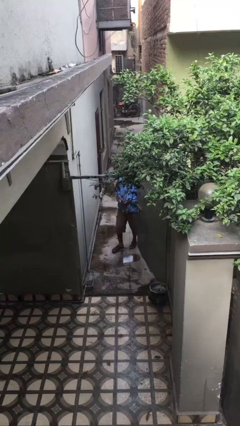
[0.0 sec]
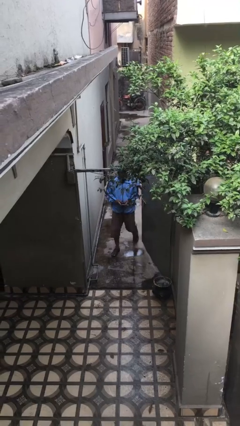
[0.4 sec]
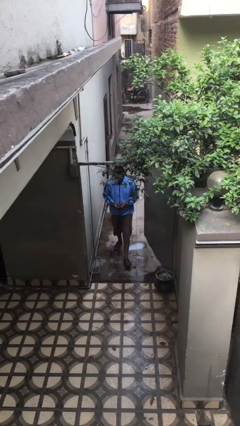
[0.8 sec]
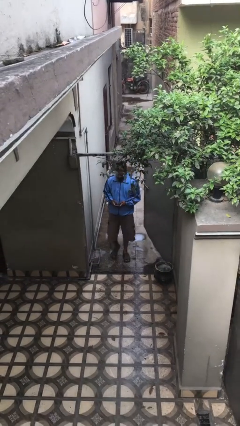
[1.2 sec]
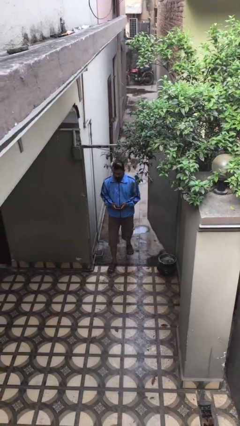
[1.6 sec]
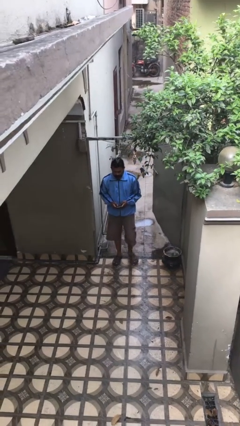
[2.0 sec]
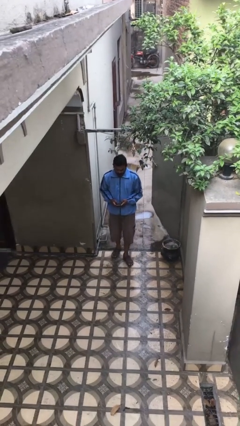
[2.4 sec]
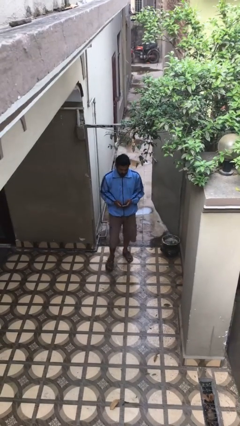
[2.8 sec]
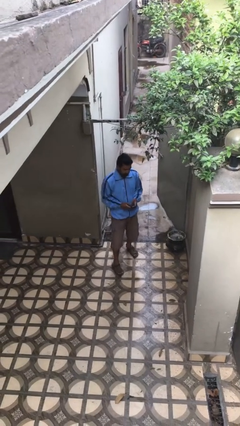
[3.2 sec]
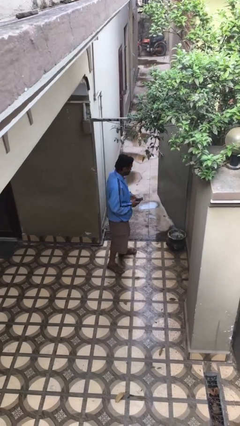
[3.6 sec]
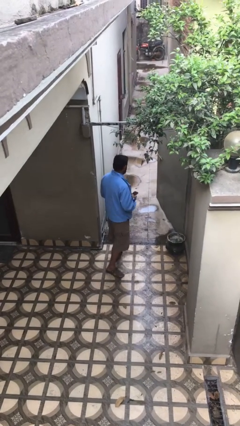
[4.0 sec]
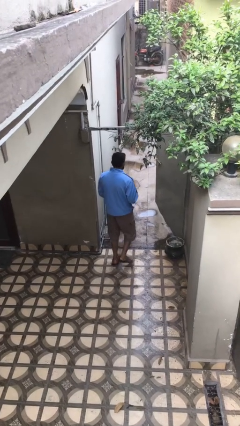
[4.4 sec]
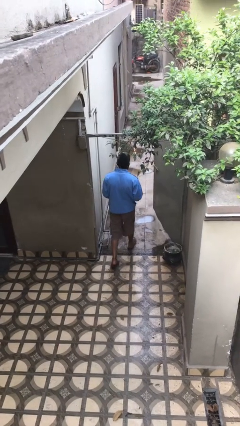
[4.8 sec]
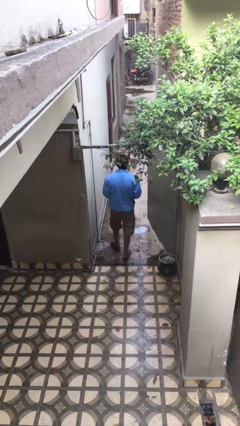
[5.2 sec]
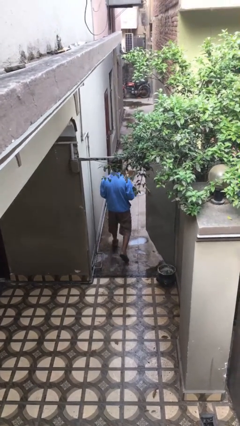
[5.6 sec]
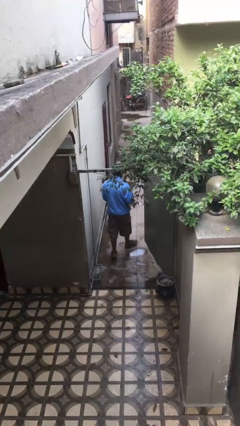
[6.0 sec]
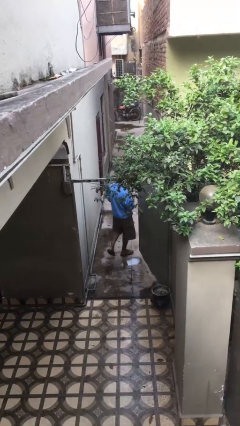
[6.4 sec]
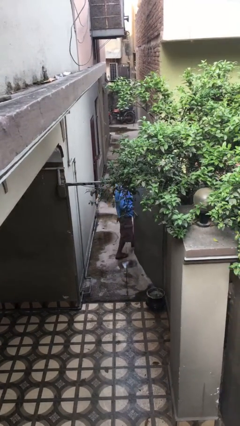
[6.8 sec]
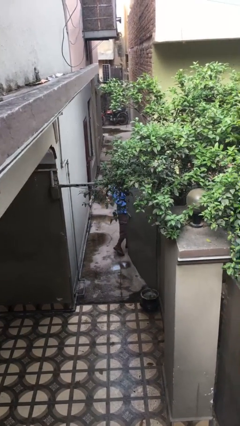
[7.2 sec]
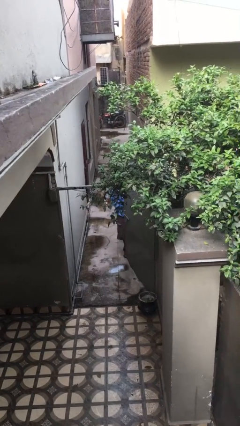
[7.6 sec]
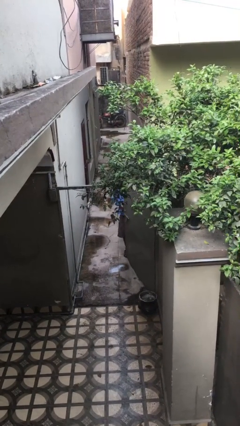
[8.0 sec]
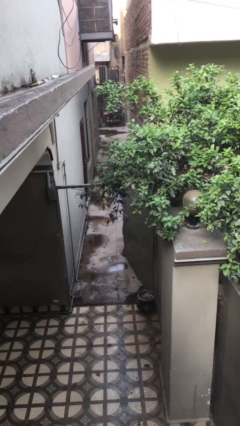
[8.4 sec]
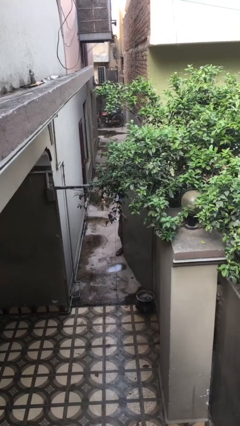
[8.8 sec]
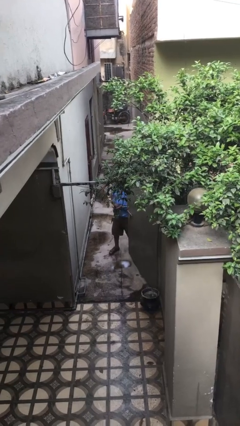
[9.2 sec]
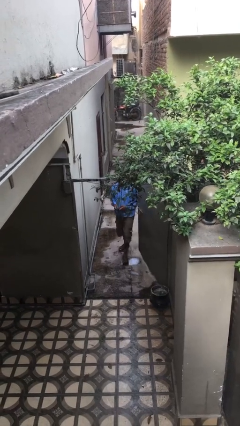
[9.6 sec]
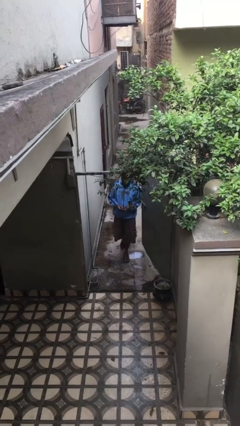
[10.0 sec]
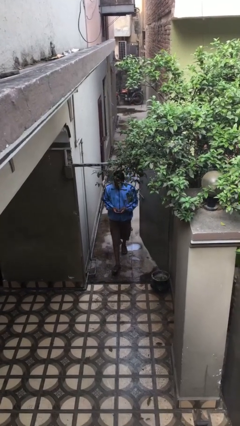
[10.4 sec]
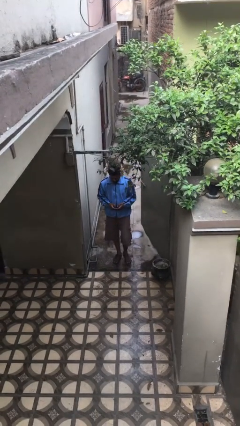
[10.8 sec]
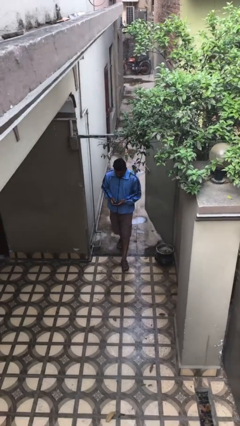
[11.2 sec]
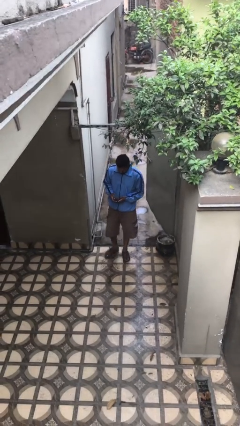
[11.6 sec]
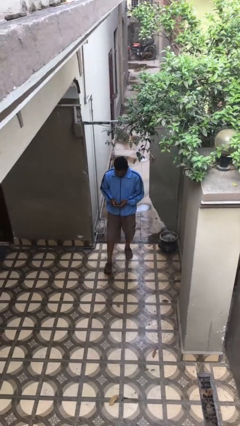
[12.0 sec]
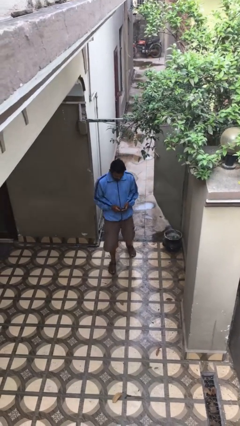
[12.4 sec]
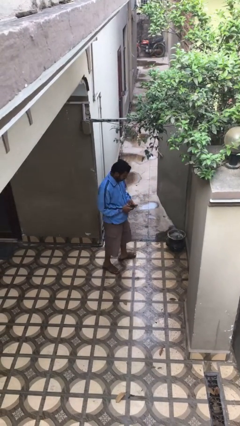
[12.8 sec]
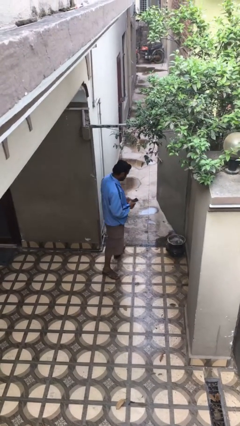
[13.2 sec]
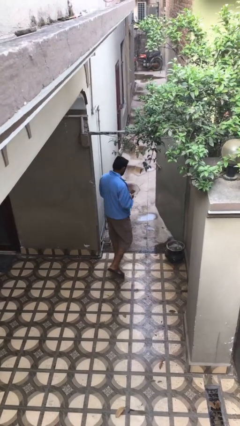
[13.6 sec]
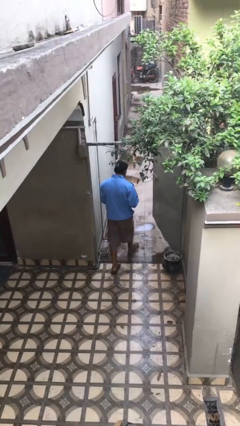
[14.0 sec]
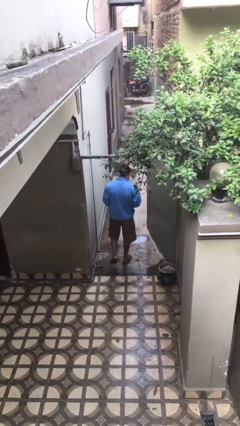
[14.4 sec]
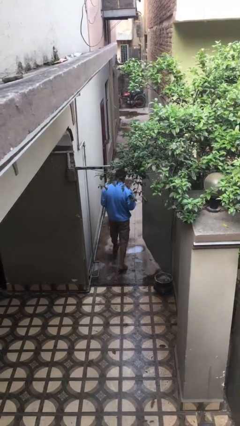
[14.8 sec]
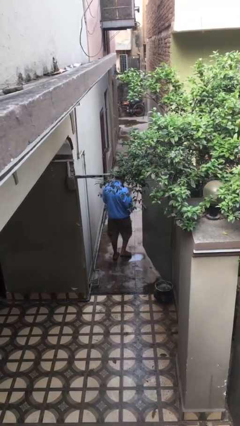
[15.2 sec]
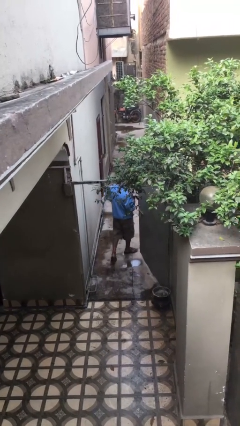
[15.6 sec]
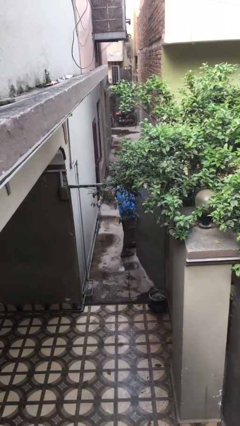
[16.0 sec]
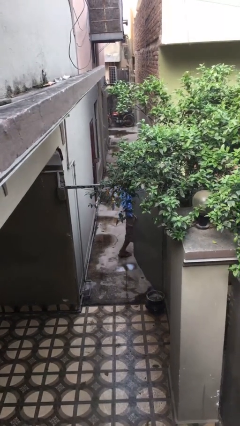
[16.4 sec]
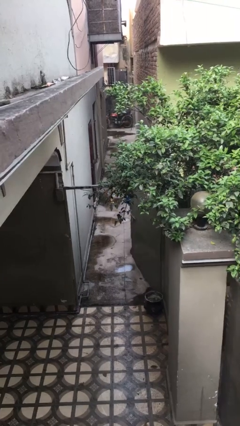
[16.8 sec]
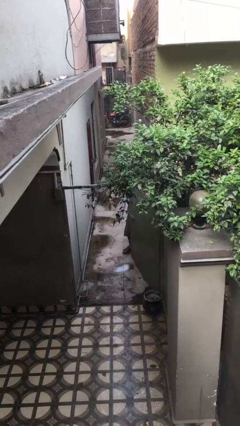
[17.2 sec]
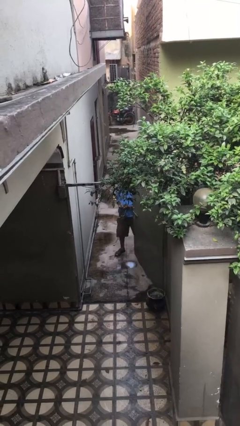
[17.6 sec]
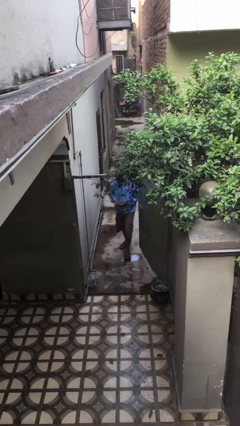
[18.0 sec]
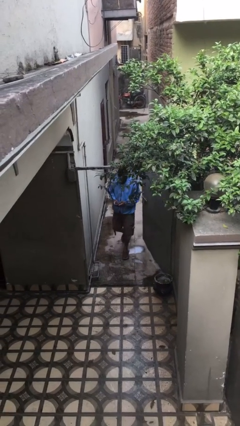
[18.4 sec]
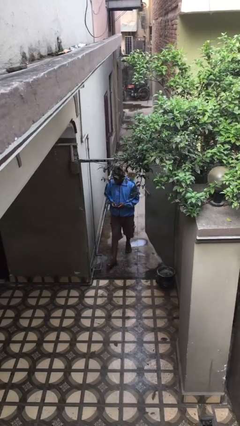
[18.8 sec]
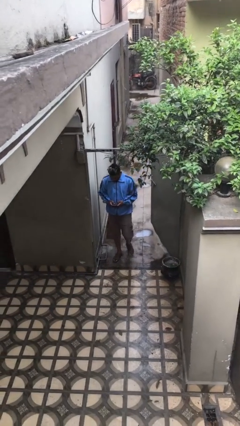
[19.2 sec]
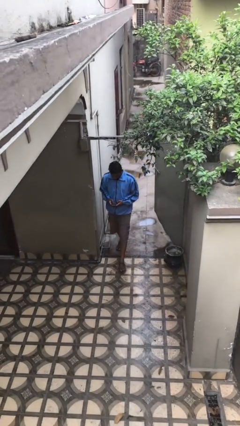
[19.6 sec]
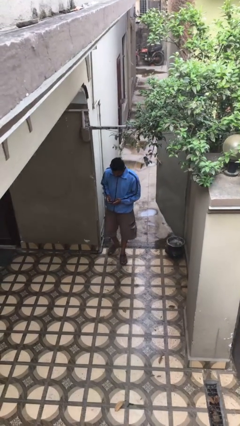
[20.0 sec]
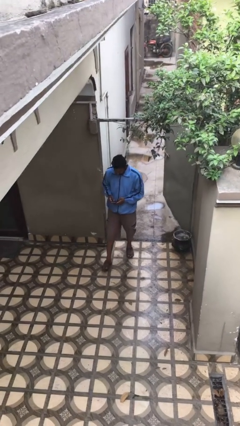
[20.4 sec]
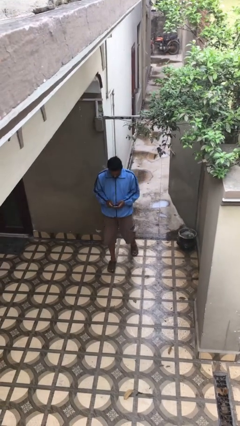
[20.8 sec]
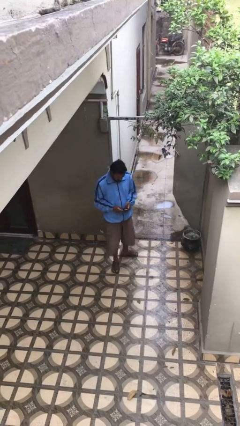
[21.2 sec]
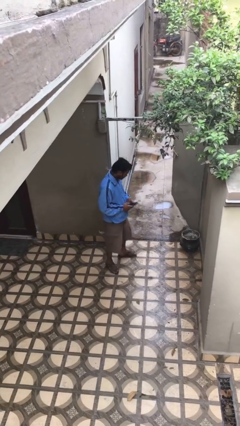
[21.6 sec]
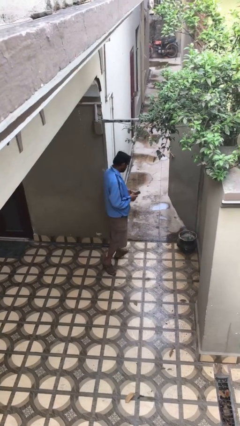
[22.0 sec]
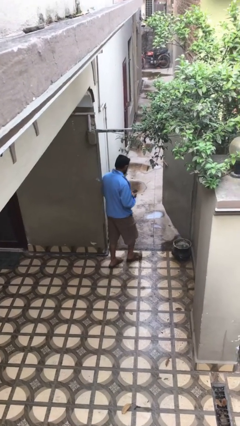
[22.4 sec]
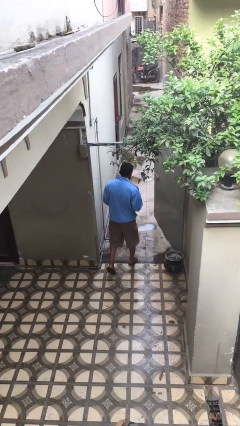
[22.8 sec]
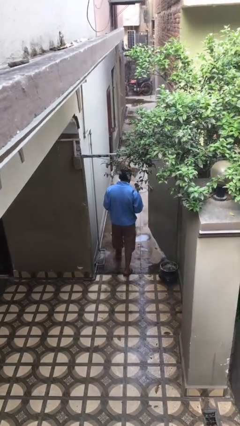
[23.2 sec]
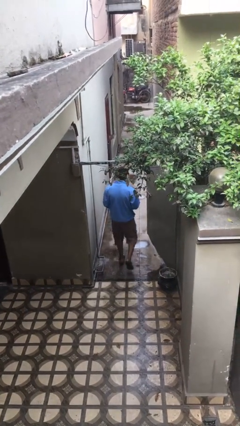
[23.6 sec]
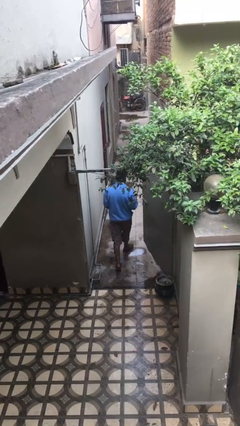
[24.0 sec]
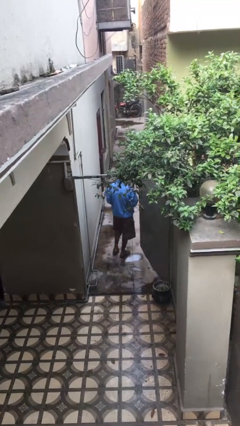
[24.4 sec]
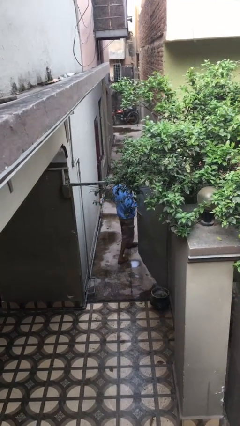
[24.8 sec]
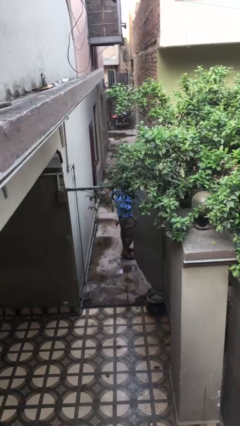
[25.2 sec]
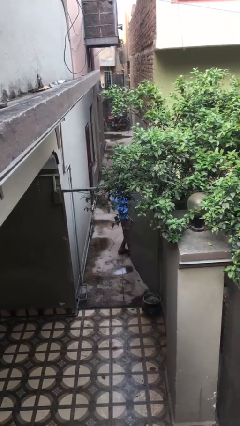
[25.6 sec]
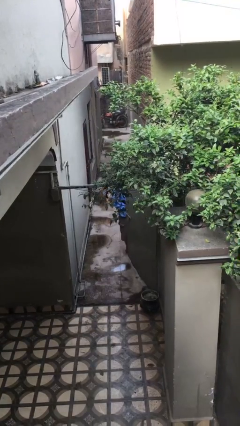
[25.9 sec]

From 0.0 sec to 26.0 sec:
person texts on phone

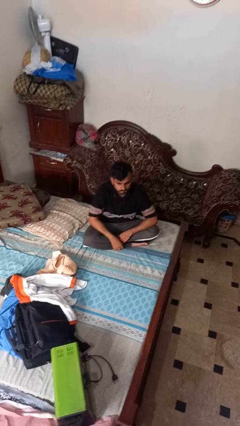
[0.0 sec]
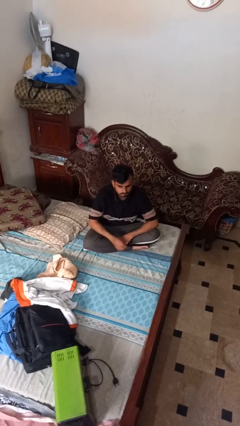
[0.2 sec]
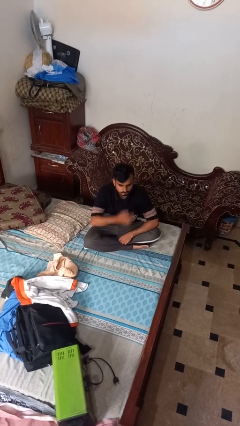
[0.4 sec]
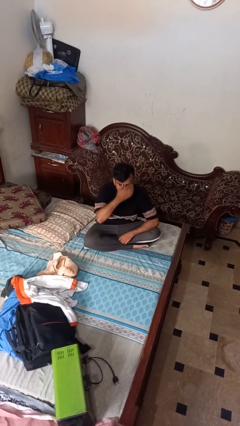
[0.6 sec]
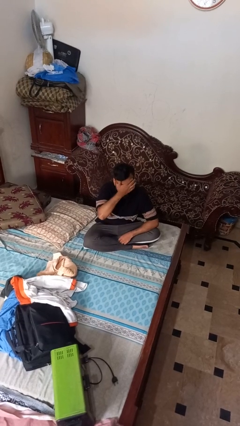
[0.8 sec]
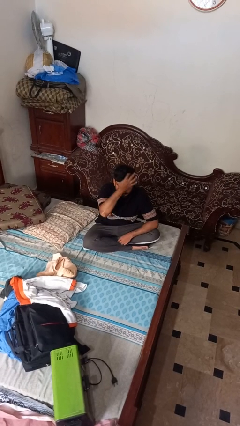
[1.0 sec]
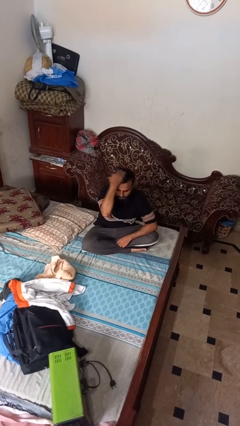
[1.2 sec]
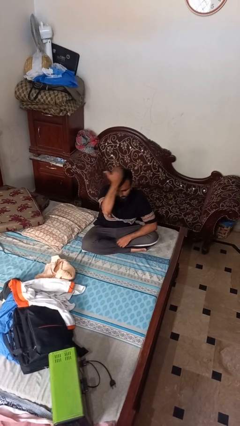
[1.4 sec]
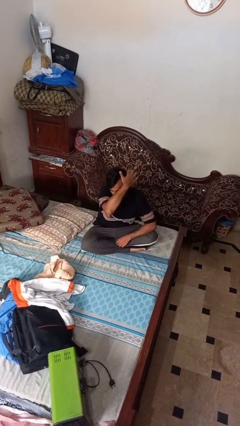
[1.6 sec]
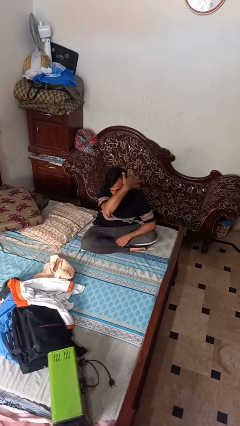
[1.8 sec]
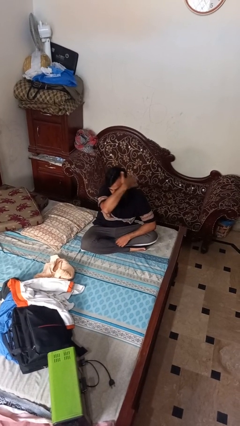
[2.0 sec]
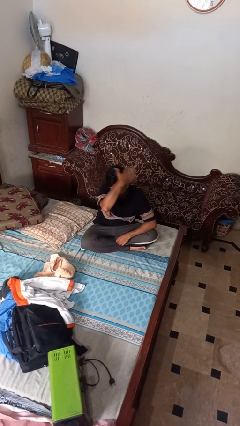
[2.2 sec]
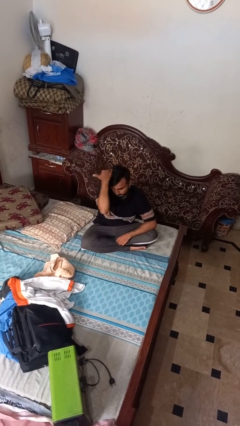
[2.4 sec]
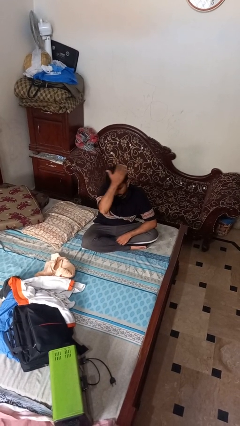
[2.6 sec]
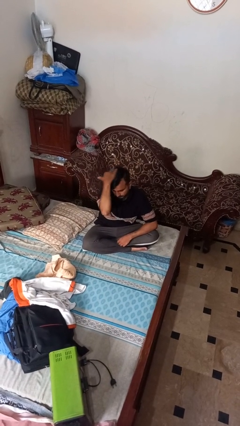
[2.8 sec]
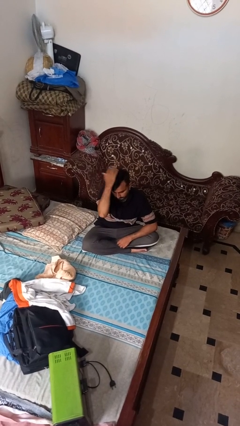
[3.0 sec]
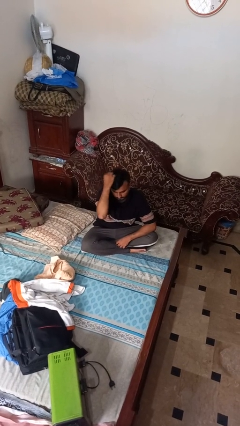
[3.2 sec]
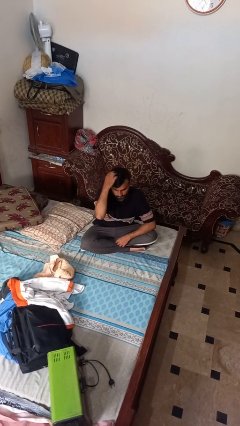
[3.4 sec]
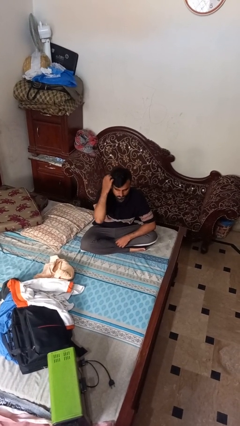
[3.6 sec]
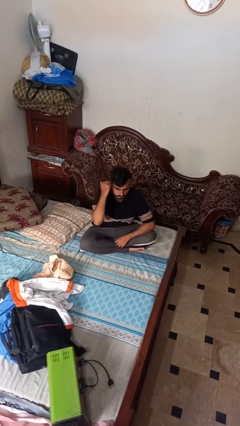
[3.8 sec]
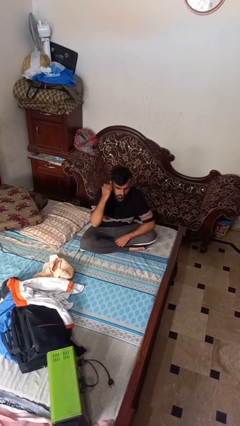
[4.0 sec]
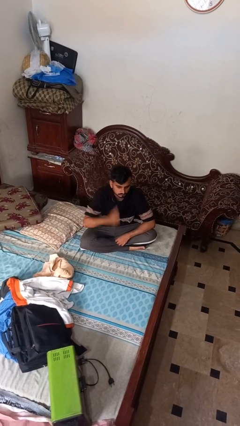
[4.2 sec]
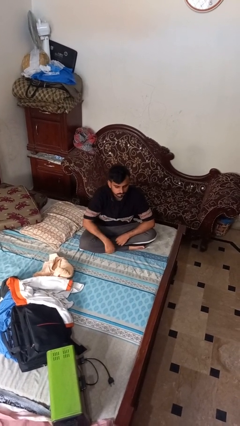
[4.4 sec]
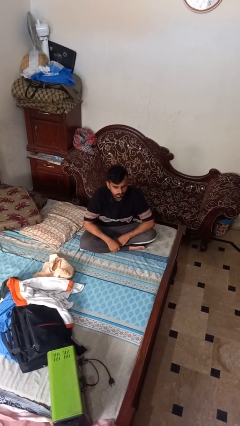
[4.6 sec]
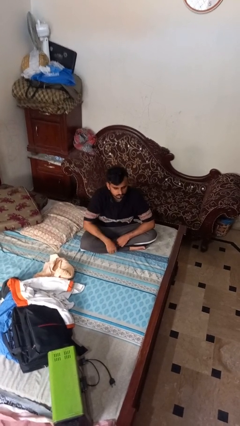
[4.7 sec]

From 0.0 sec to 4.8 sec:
person strokes hair

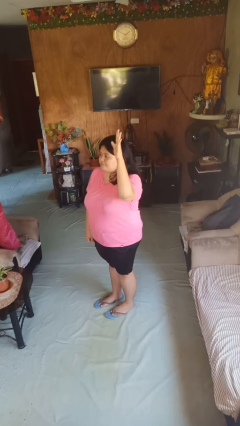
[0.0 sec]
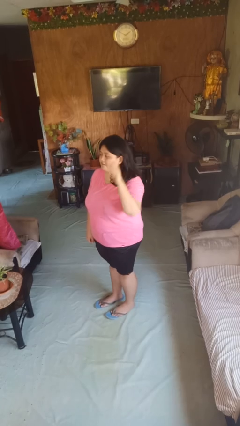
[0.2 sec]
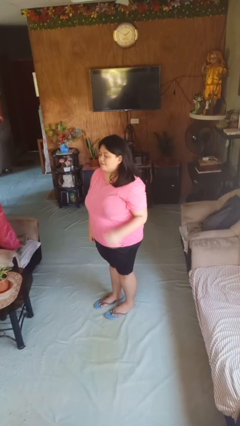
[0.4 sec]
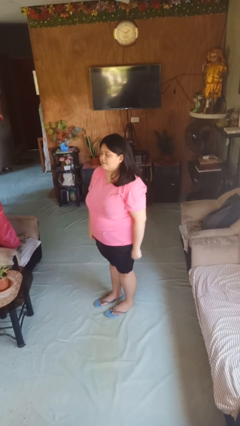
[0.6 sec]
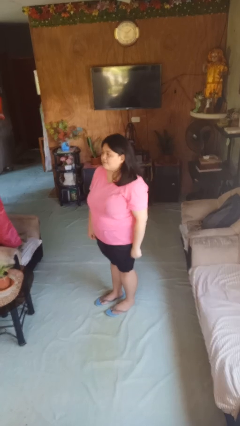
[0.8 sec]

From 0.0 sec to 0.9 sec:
person gestures lower hand
